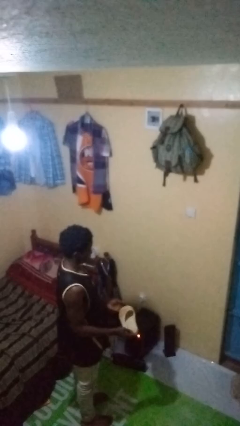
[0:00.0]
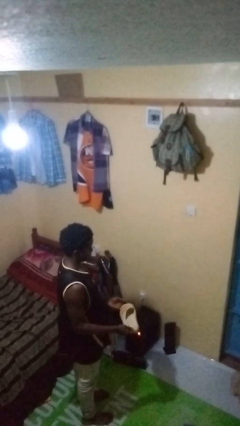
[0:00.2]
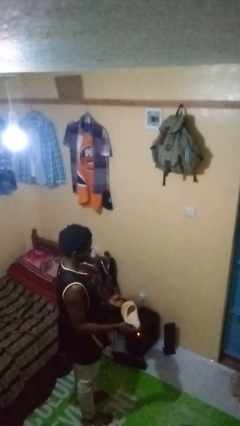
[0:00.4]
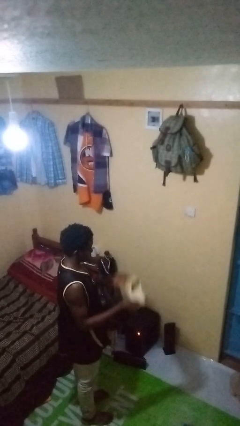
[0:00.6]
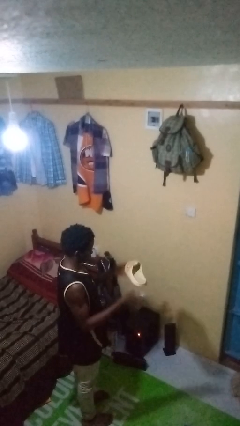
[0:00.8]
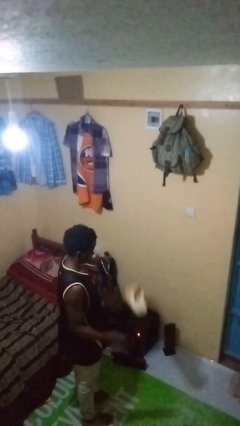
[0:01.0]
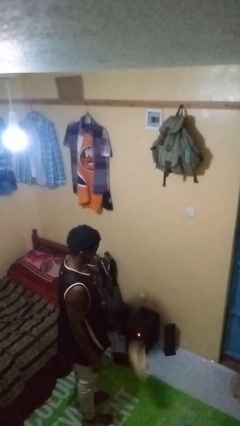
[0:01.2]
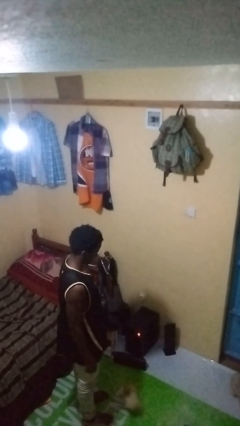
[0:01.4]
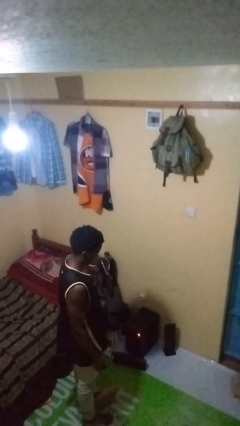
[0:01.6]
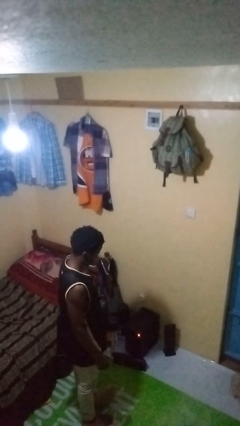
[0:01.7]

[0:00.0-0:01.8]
person throws object into air

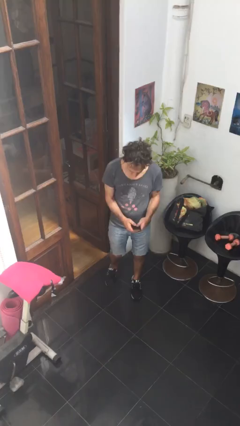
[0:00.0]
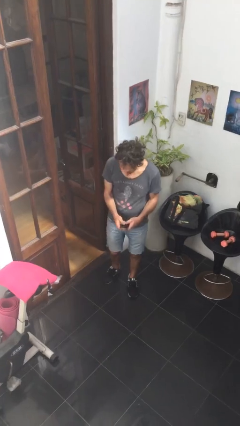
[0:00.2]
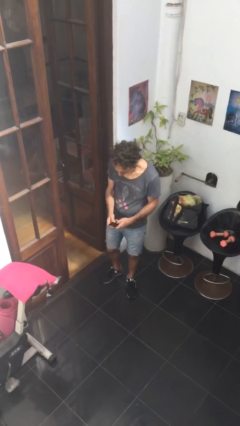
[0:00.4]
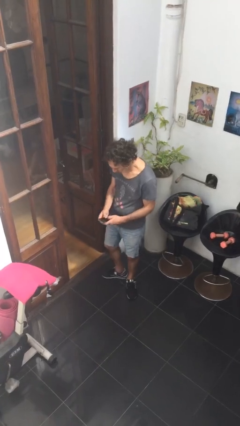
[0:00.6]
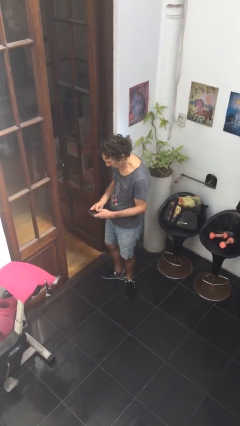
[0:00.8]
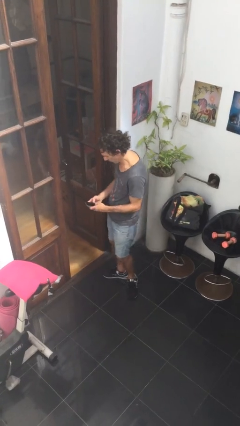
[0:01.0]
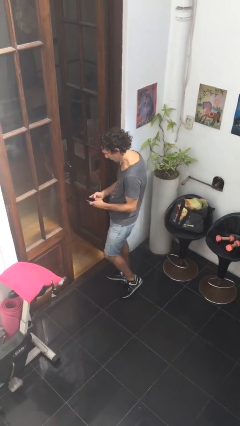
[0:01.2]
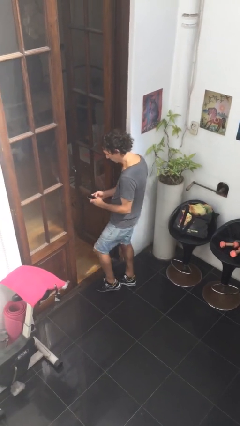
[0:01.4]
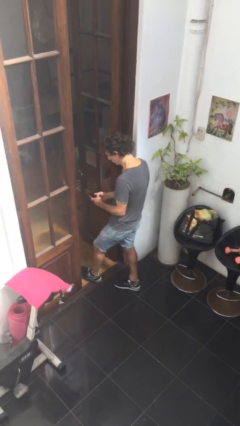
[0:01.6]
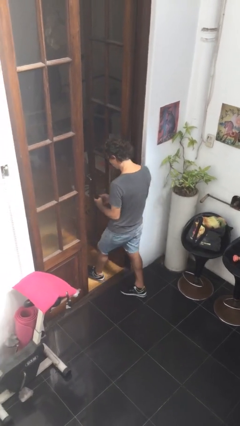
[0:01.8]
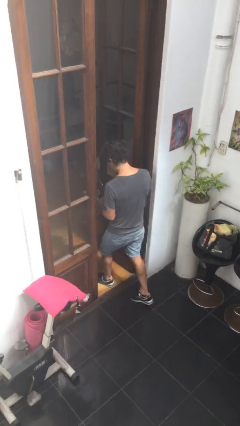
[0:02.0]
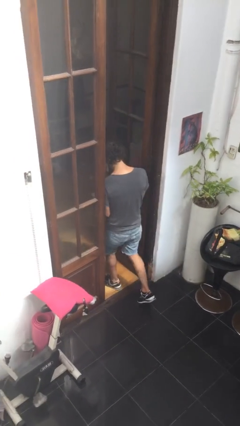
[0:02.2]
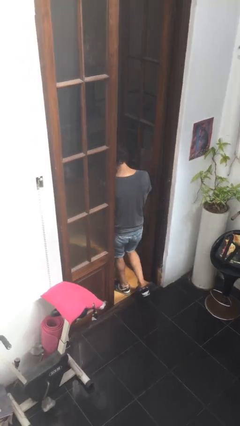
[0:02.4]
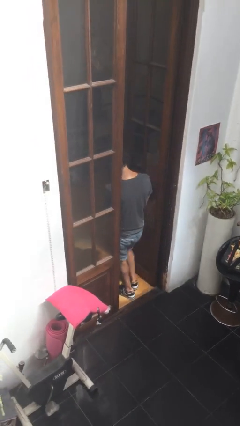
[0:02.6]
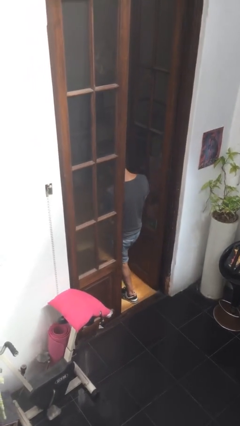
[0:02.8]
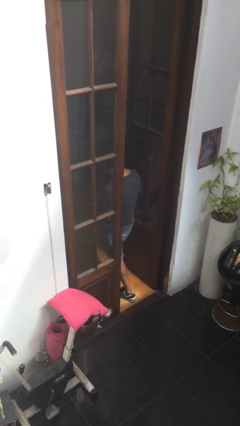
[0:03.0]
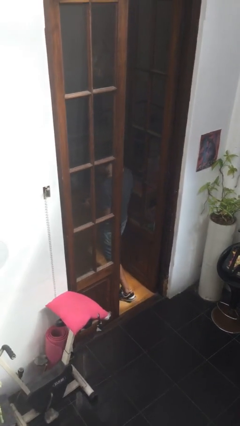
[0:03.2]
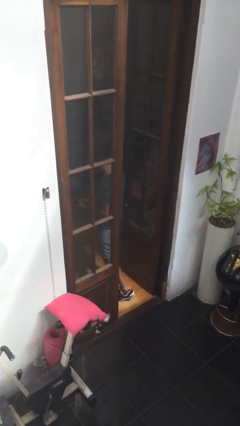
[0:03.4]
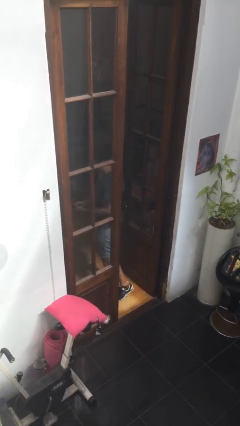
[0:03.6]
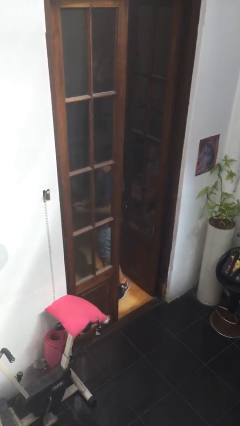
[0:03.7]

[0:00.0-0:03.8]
person exits scene through structure

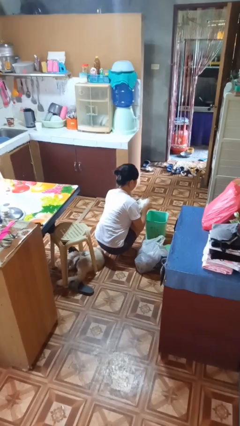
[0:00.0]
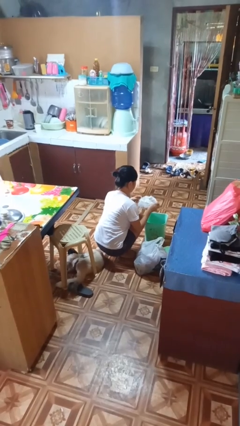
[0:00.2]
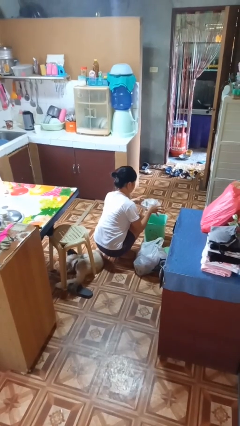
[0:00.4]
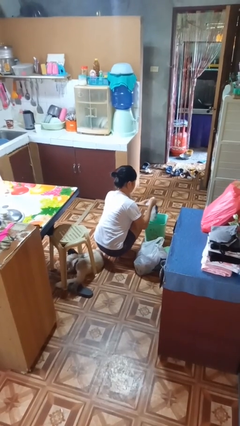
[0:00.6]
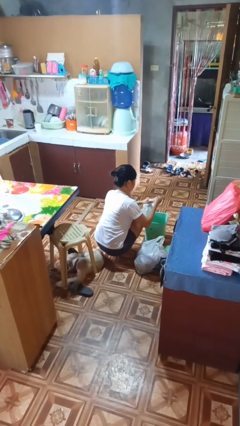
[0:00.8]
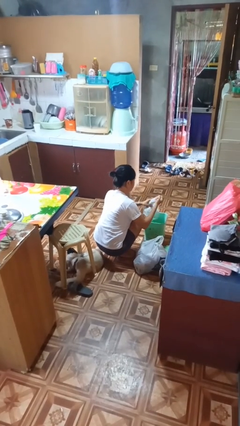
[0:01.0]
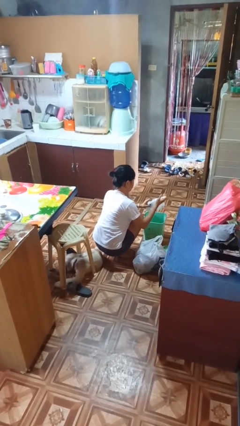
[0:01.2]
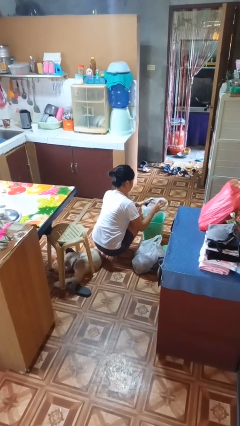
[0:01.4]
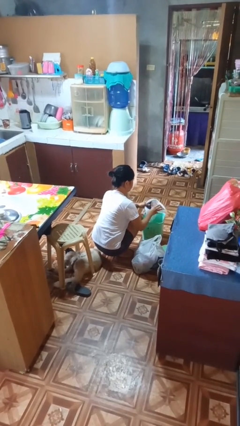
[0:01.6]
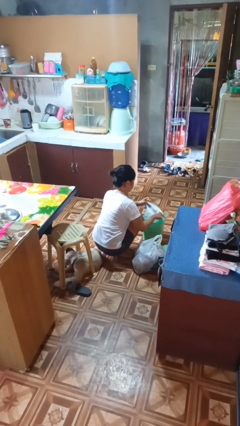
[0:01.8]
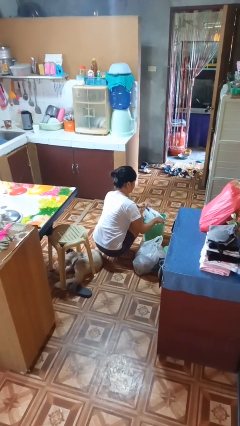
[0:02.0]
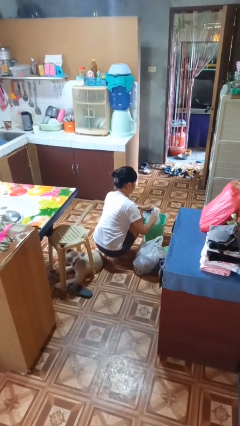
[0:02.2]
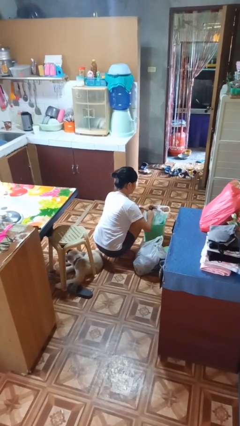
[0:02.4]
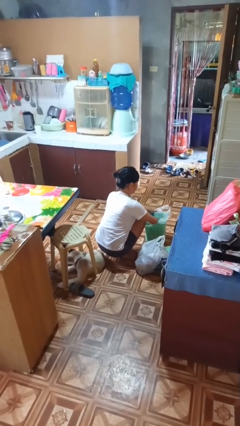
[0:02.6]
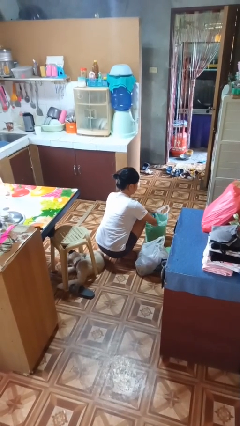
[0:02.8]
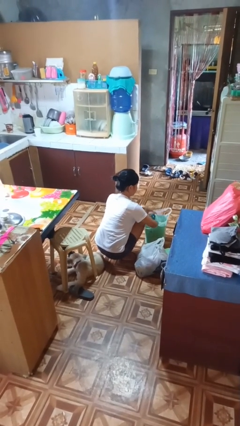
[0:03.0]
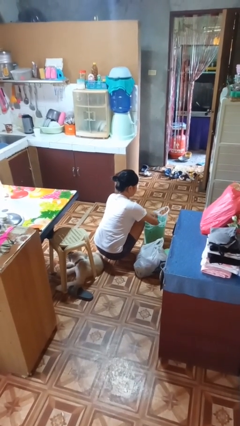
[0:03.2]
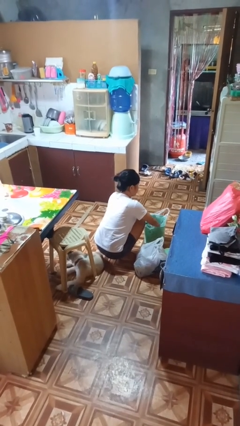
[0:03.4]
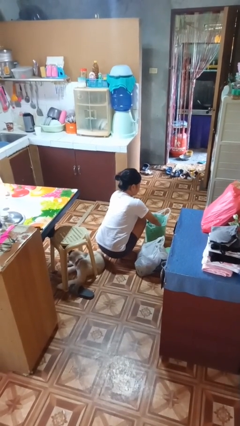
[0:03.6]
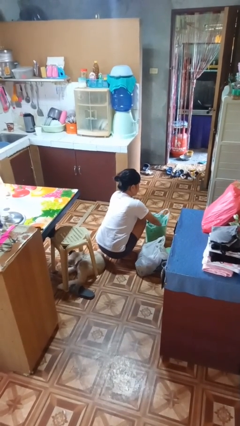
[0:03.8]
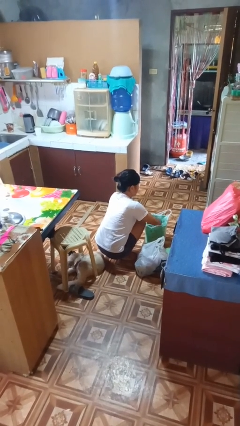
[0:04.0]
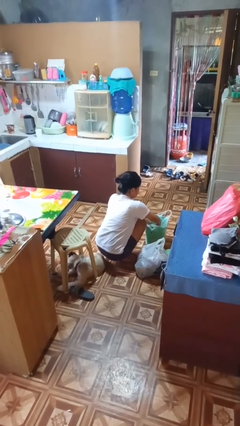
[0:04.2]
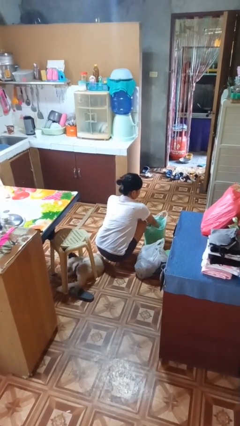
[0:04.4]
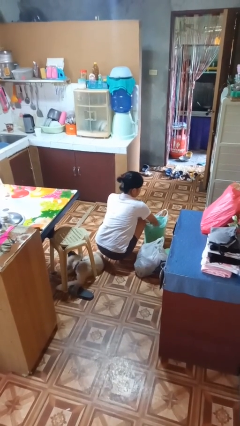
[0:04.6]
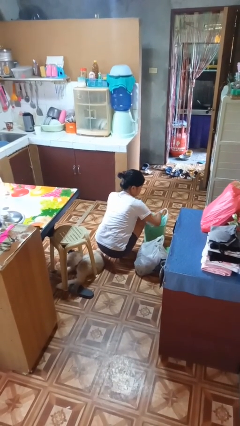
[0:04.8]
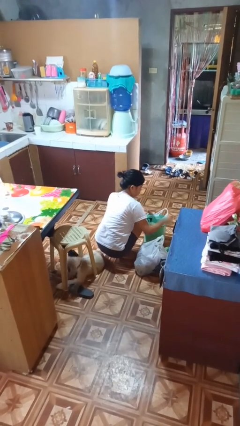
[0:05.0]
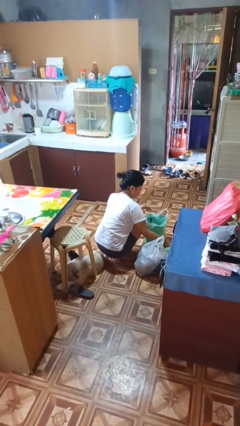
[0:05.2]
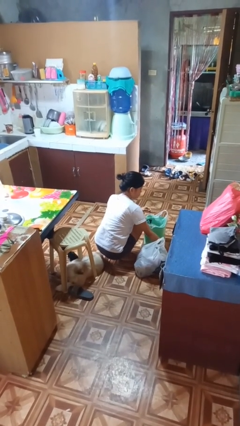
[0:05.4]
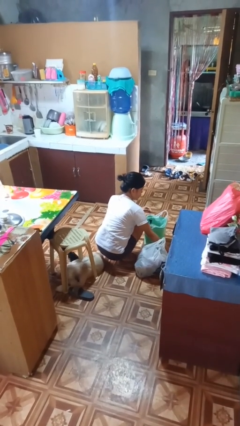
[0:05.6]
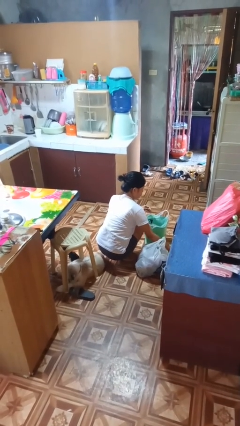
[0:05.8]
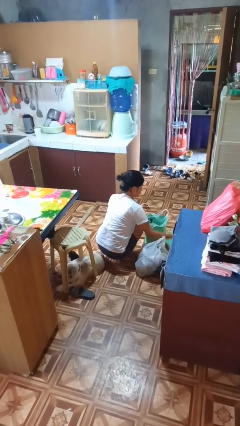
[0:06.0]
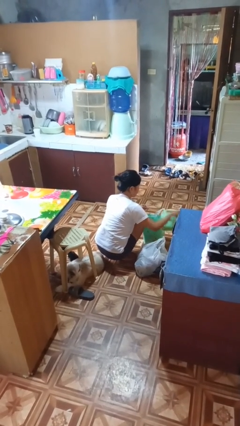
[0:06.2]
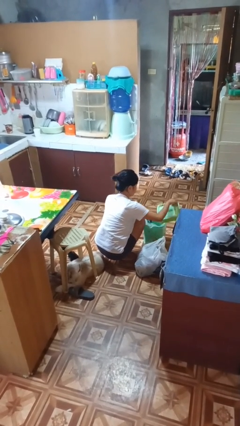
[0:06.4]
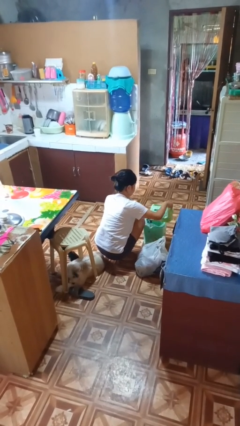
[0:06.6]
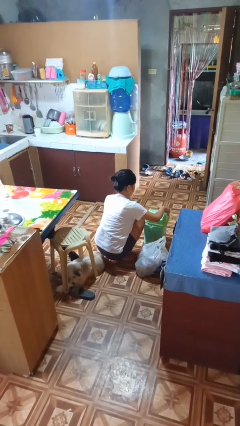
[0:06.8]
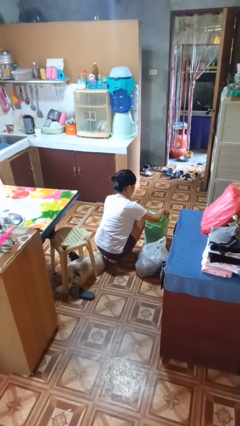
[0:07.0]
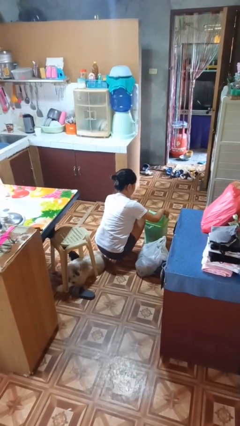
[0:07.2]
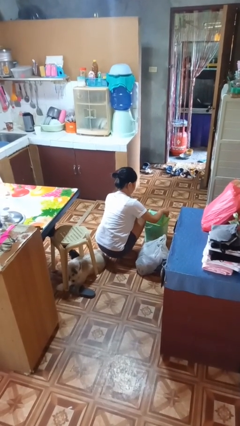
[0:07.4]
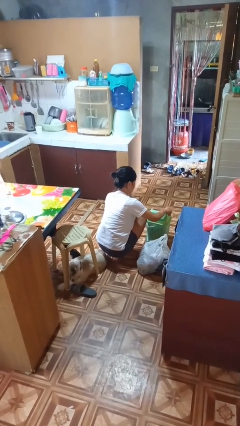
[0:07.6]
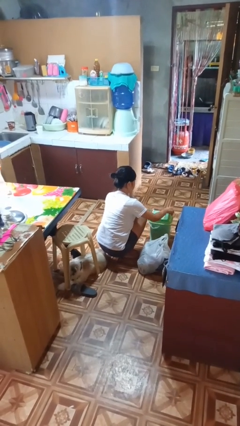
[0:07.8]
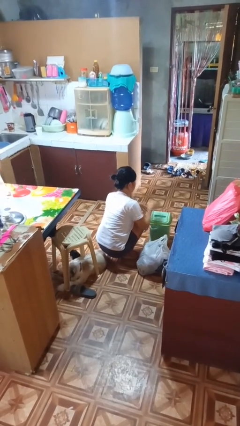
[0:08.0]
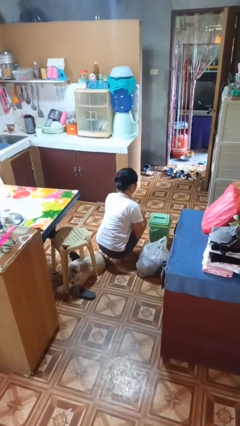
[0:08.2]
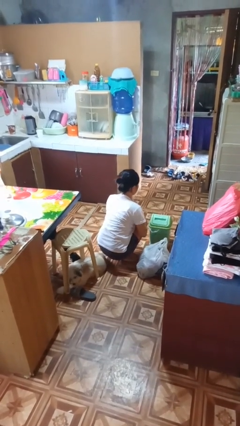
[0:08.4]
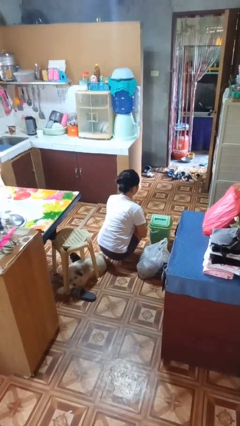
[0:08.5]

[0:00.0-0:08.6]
person inserts trashbag into trashcan

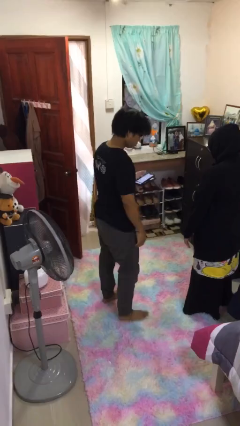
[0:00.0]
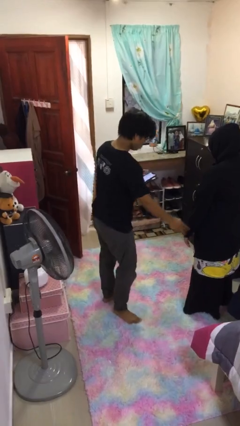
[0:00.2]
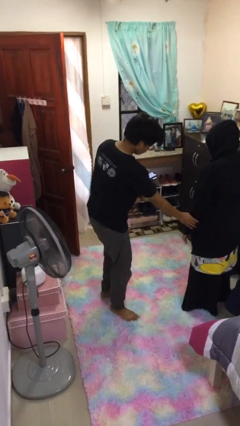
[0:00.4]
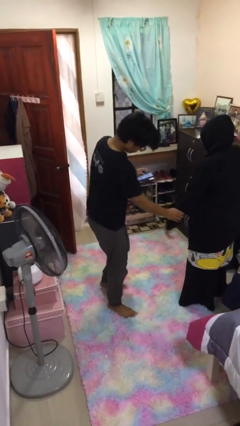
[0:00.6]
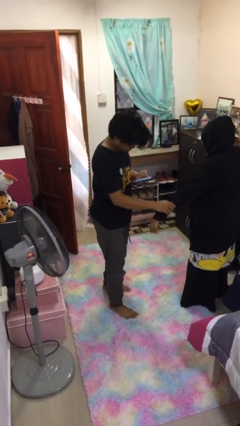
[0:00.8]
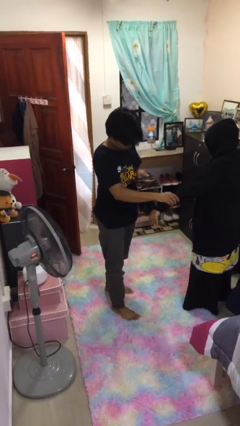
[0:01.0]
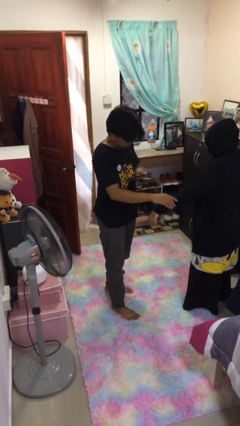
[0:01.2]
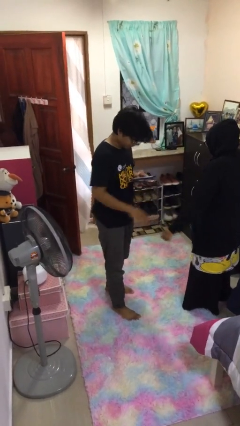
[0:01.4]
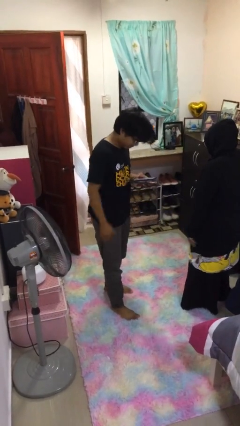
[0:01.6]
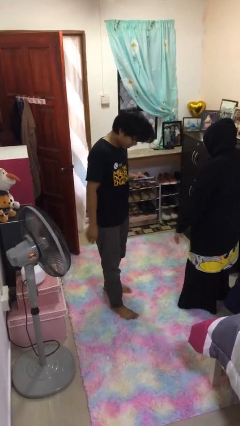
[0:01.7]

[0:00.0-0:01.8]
person grabs person by forearm

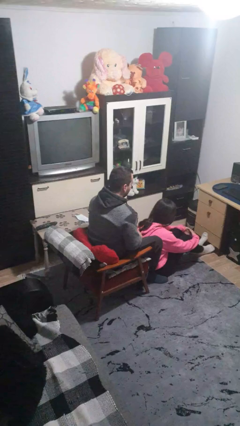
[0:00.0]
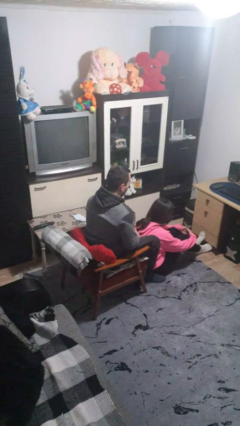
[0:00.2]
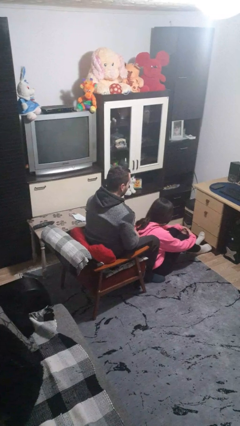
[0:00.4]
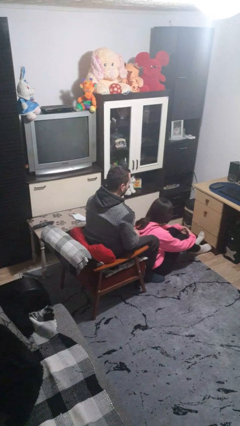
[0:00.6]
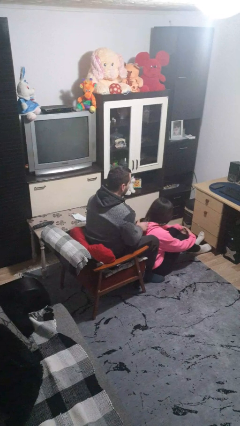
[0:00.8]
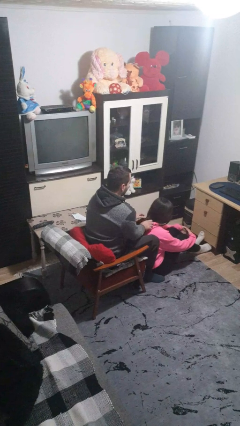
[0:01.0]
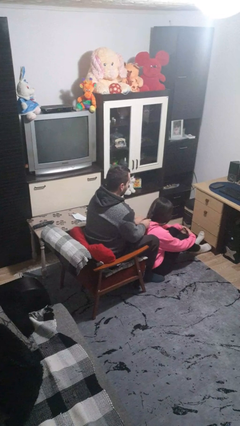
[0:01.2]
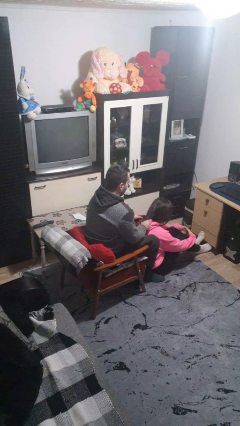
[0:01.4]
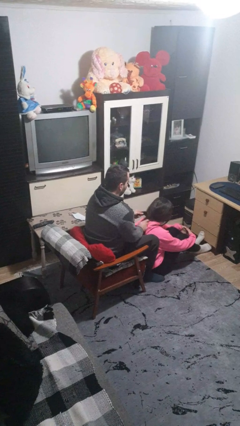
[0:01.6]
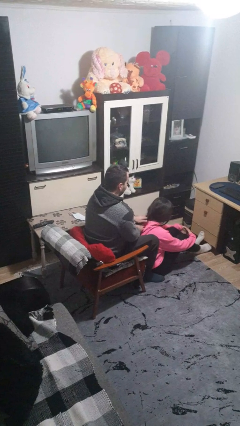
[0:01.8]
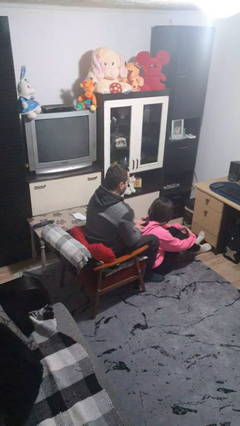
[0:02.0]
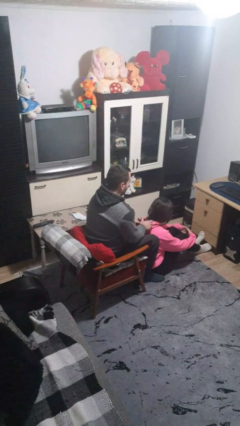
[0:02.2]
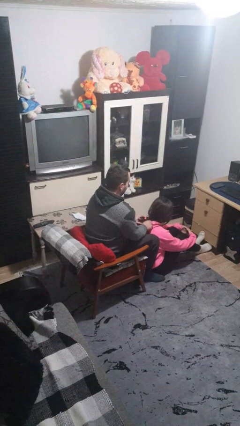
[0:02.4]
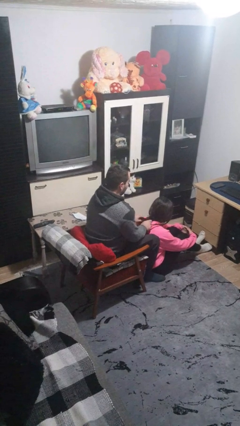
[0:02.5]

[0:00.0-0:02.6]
person braids hair of person
